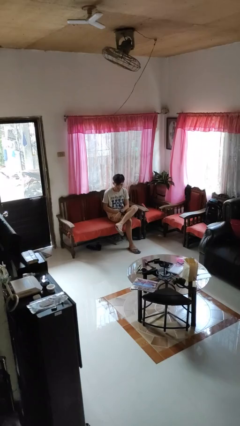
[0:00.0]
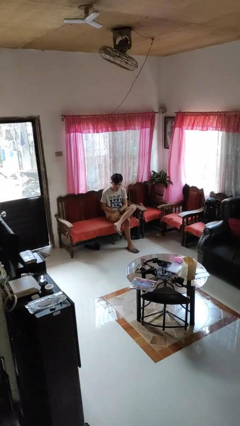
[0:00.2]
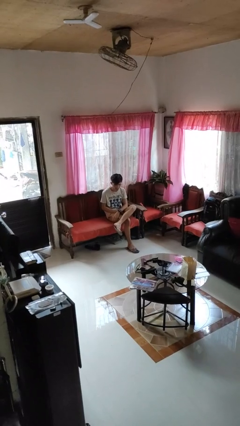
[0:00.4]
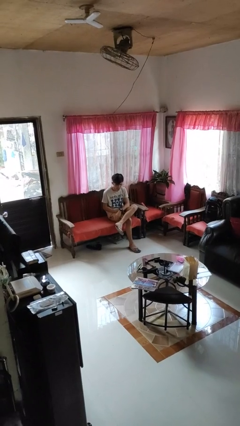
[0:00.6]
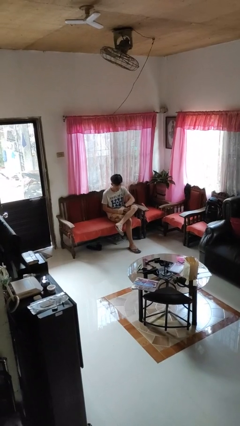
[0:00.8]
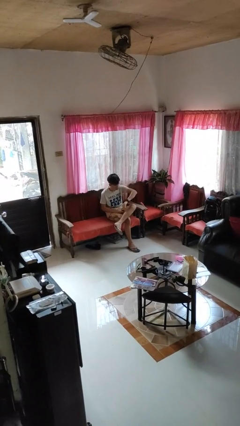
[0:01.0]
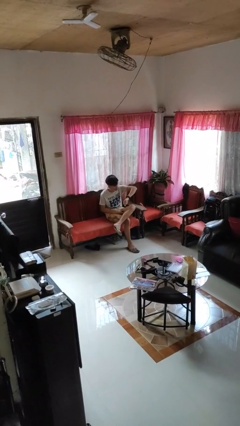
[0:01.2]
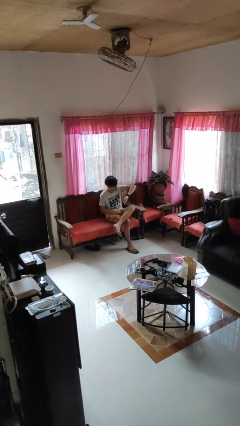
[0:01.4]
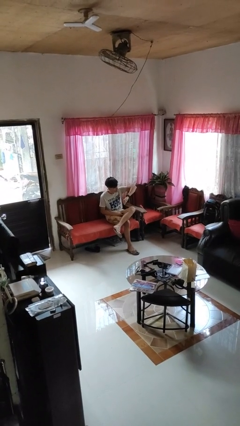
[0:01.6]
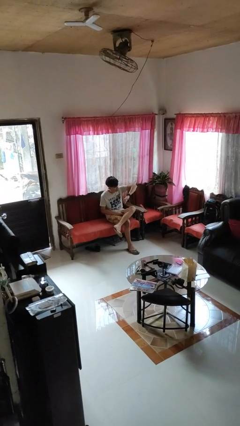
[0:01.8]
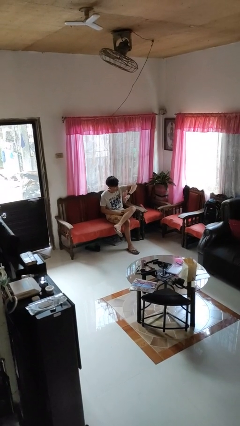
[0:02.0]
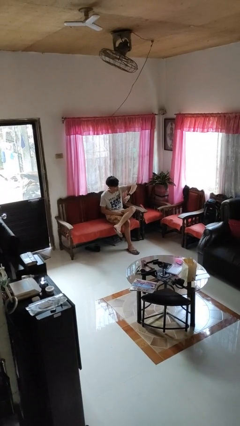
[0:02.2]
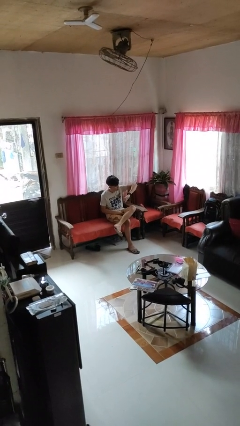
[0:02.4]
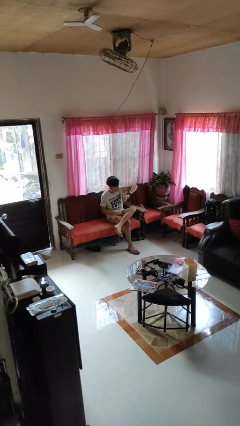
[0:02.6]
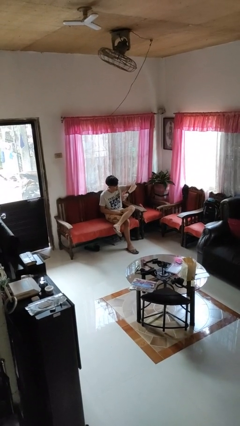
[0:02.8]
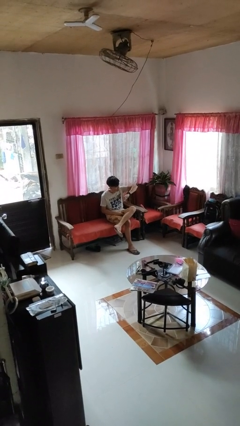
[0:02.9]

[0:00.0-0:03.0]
person looks at wristwatch

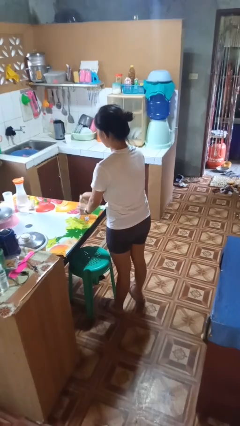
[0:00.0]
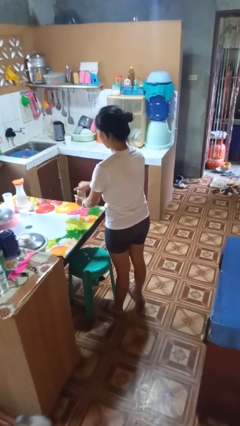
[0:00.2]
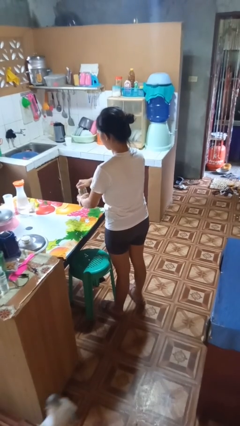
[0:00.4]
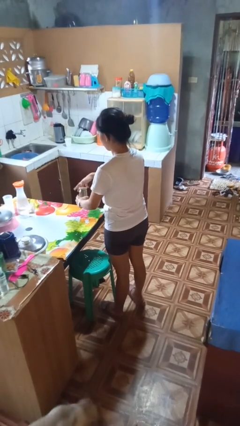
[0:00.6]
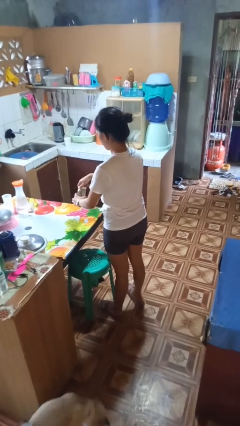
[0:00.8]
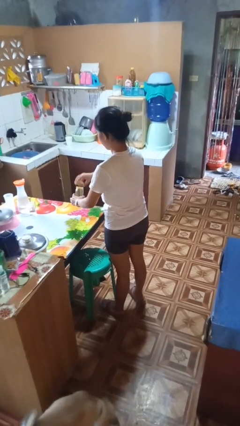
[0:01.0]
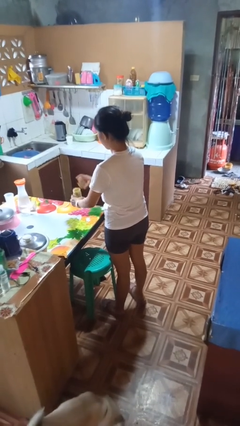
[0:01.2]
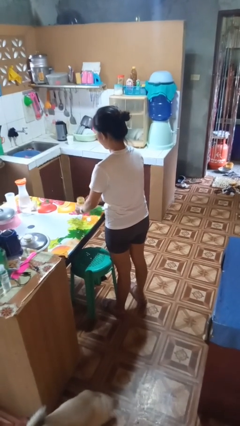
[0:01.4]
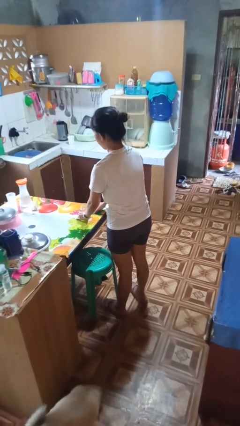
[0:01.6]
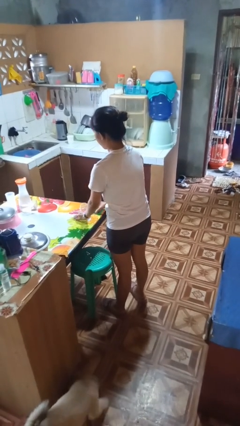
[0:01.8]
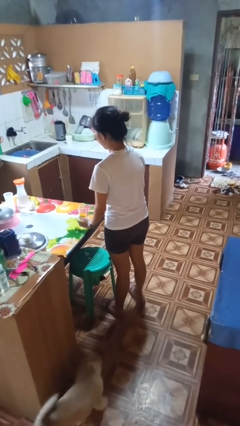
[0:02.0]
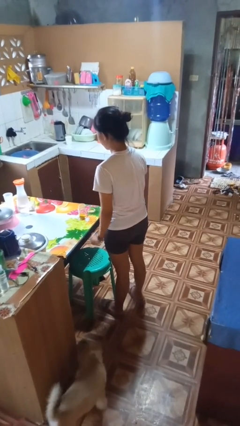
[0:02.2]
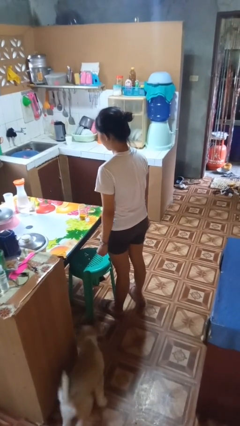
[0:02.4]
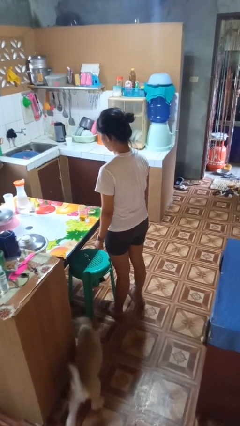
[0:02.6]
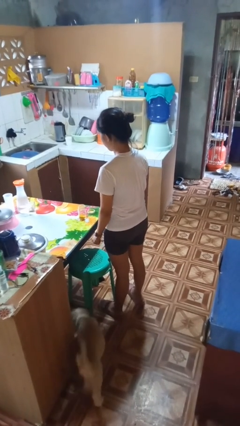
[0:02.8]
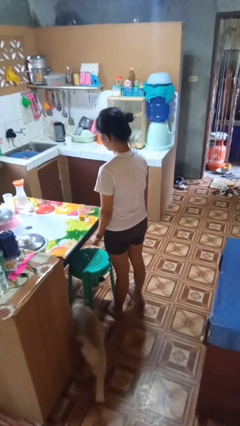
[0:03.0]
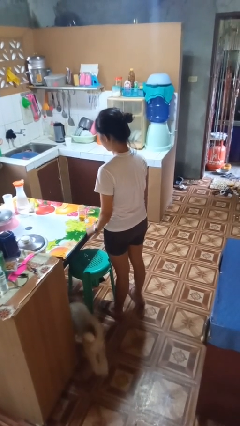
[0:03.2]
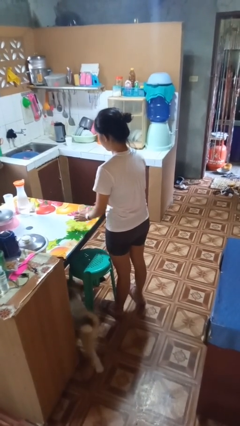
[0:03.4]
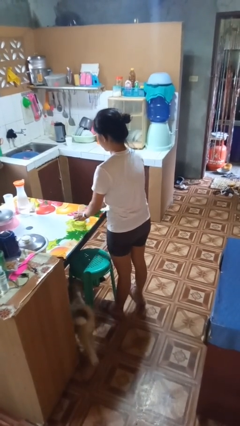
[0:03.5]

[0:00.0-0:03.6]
person opens jar

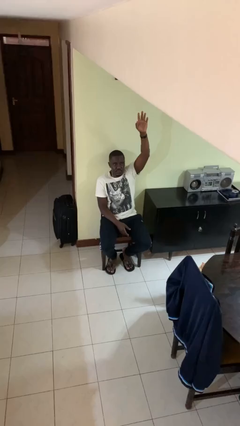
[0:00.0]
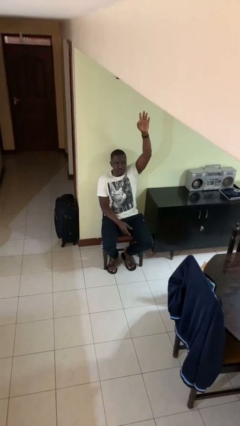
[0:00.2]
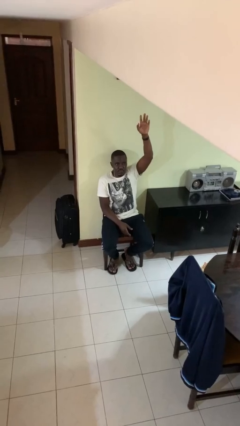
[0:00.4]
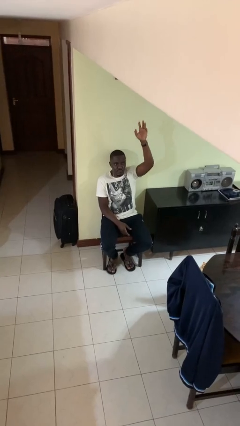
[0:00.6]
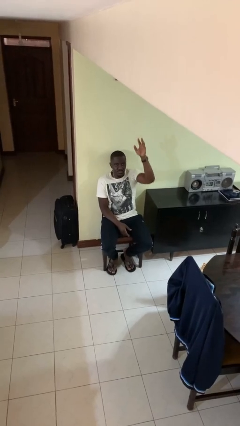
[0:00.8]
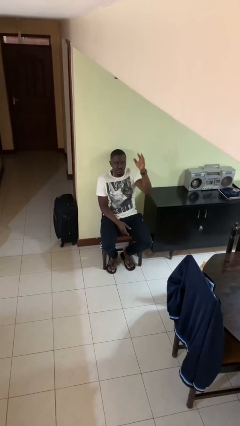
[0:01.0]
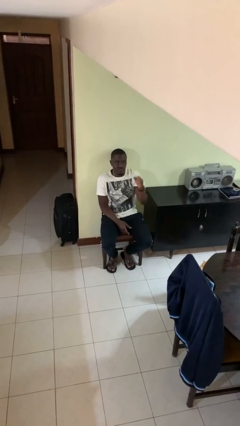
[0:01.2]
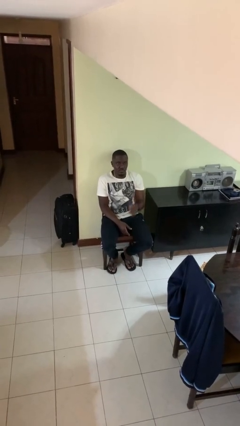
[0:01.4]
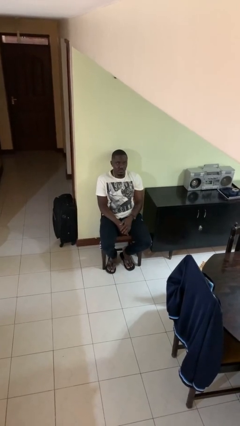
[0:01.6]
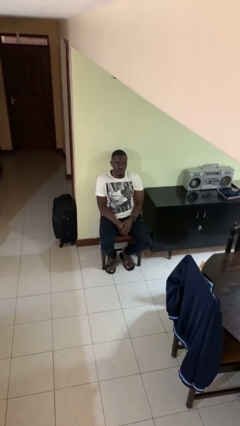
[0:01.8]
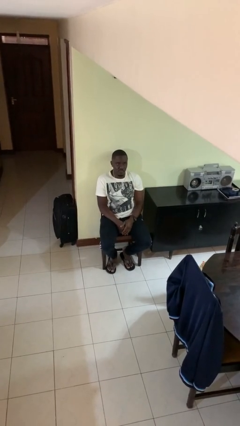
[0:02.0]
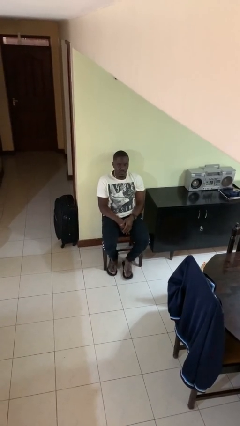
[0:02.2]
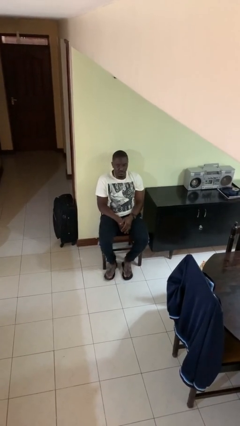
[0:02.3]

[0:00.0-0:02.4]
person gestures lower hand

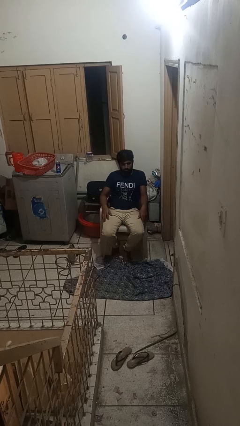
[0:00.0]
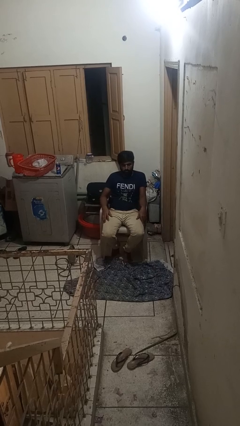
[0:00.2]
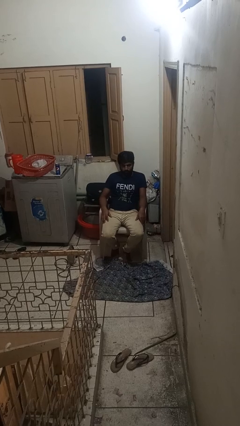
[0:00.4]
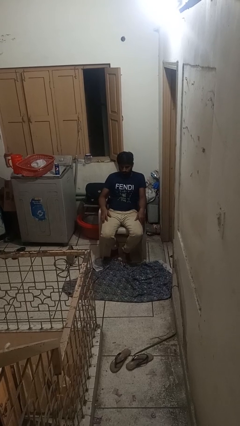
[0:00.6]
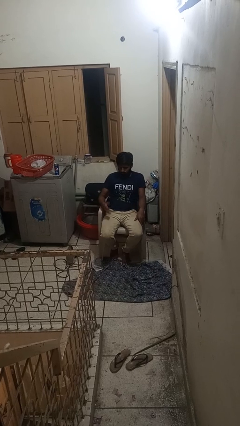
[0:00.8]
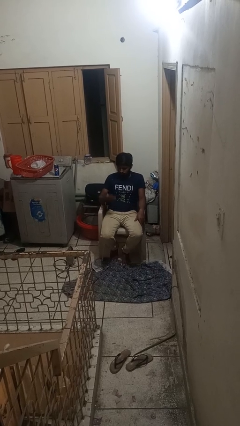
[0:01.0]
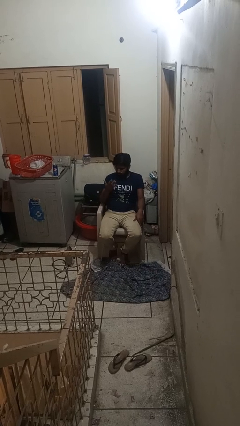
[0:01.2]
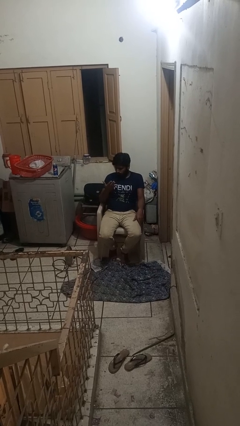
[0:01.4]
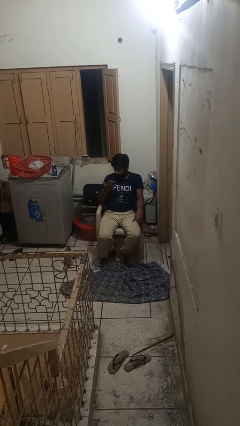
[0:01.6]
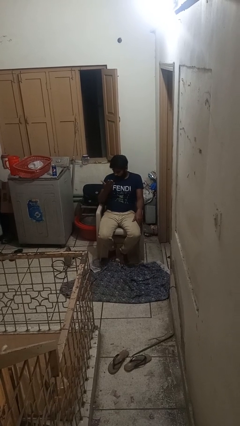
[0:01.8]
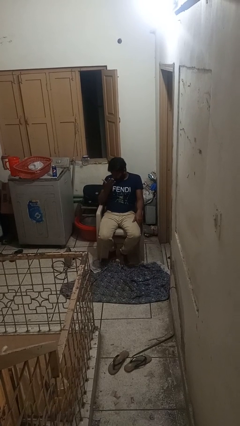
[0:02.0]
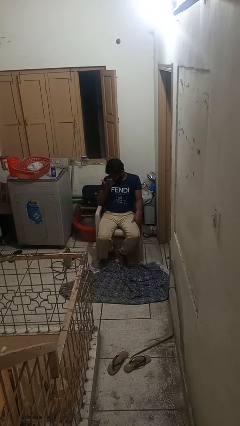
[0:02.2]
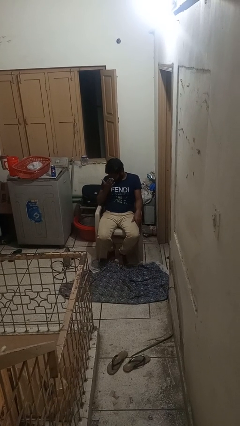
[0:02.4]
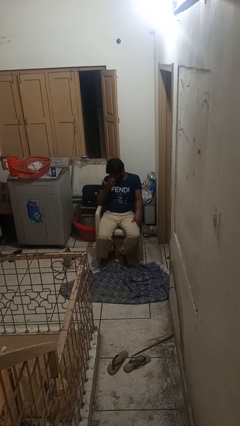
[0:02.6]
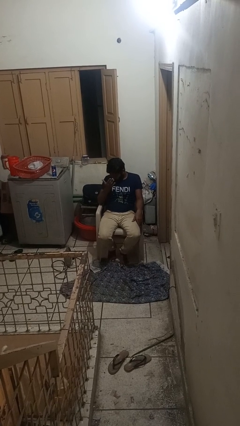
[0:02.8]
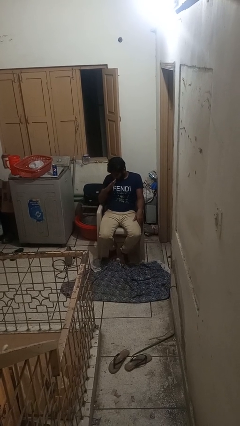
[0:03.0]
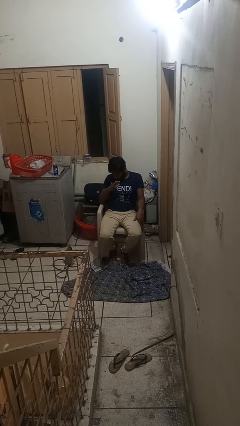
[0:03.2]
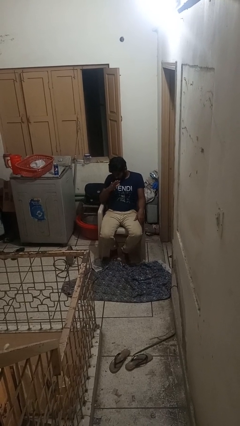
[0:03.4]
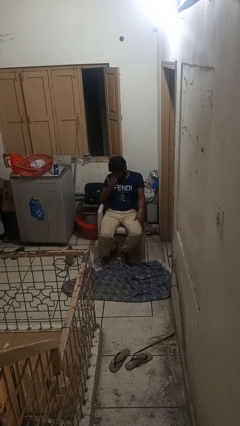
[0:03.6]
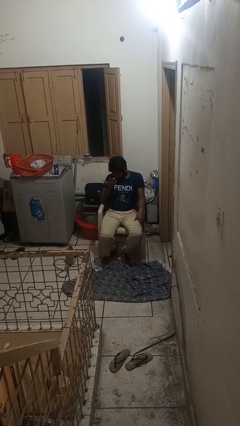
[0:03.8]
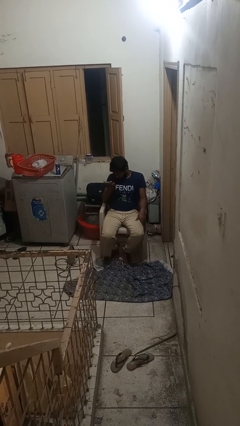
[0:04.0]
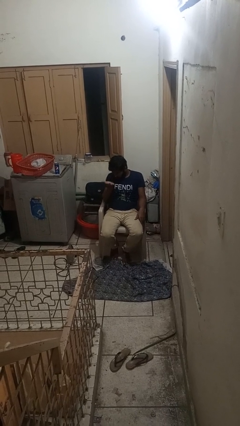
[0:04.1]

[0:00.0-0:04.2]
person looks at hands in lap

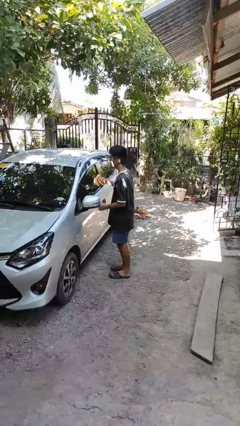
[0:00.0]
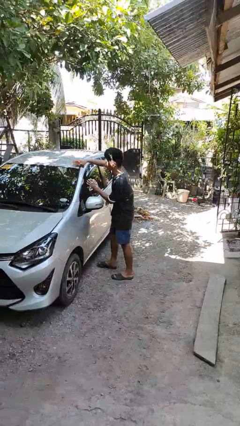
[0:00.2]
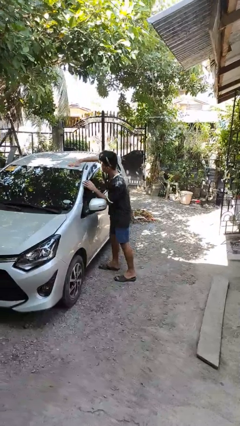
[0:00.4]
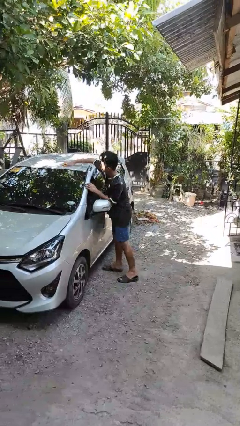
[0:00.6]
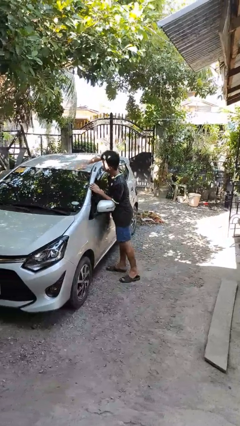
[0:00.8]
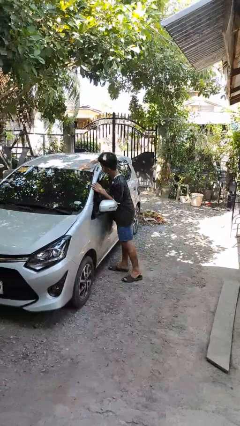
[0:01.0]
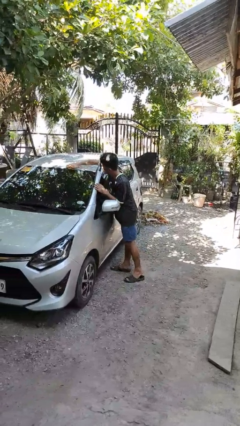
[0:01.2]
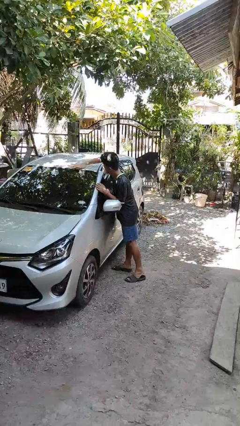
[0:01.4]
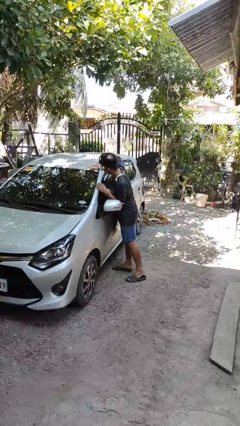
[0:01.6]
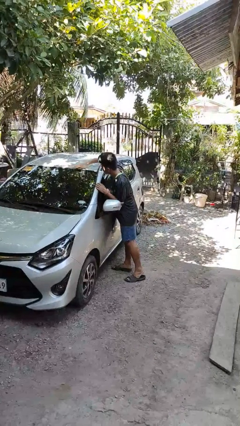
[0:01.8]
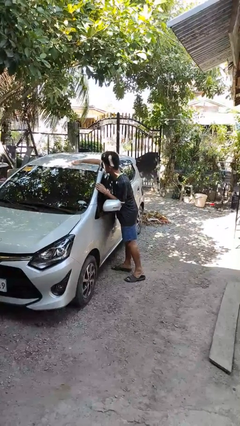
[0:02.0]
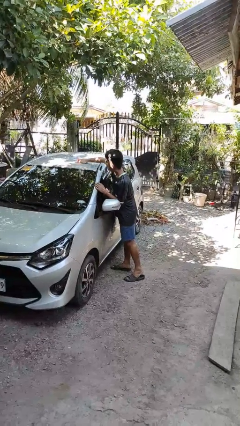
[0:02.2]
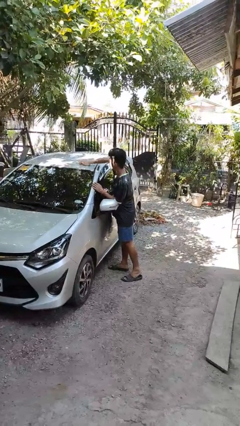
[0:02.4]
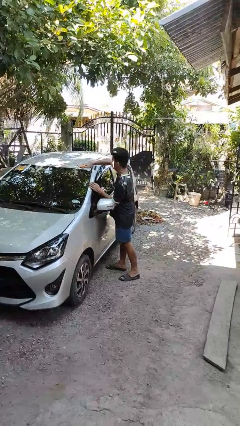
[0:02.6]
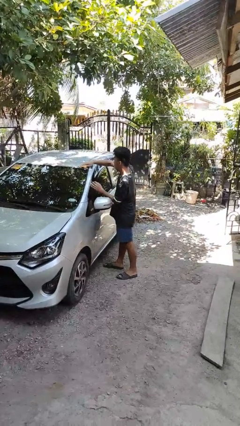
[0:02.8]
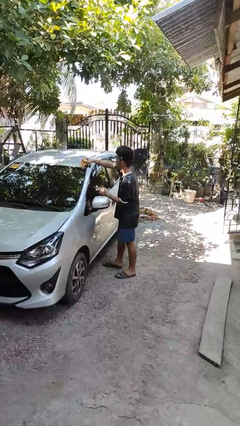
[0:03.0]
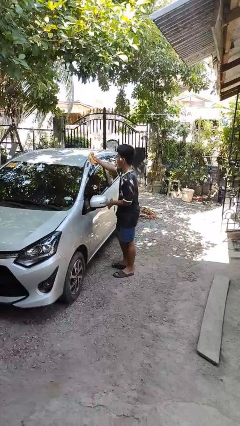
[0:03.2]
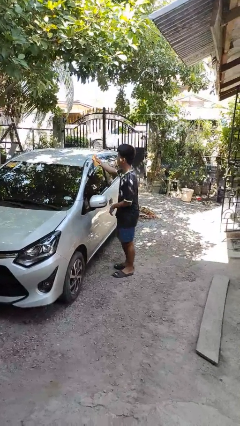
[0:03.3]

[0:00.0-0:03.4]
person polishes car with rag

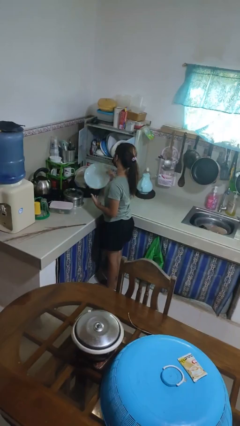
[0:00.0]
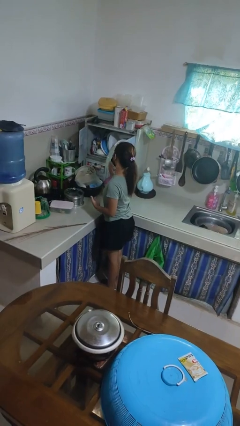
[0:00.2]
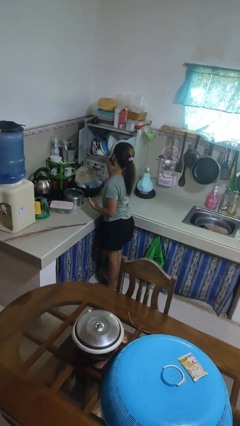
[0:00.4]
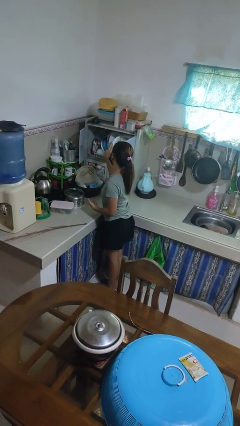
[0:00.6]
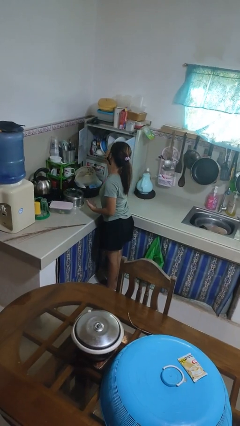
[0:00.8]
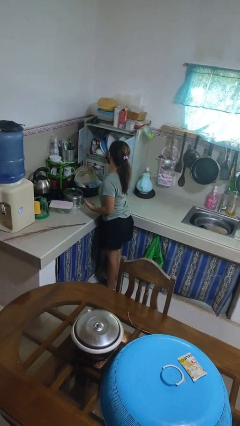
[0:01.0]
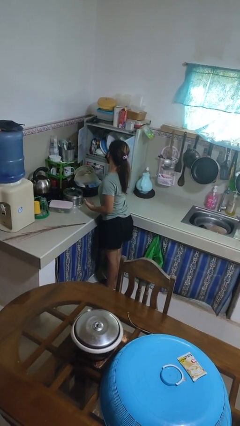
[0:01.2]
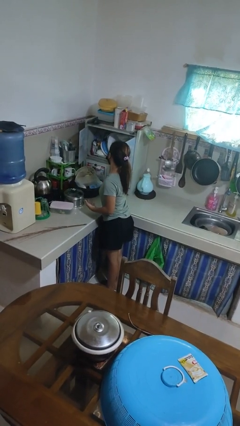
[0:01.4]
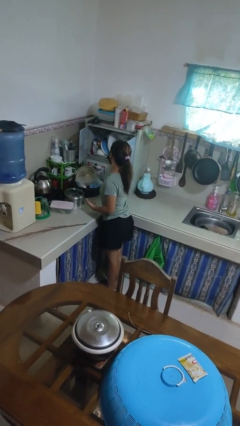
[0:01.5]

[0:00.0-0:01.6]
person puts object into kitchen drawer
